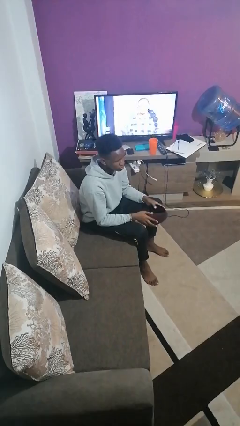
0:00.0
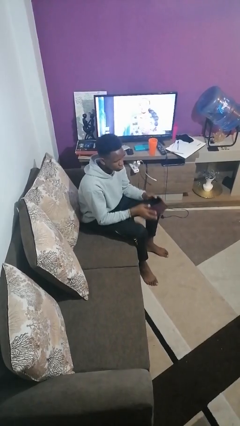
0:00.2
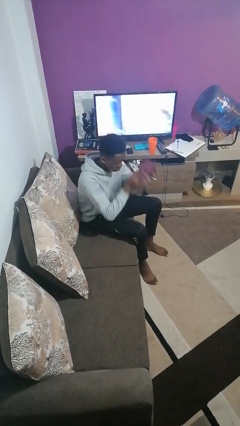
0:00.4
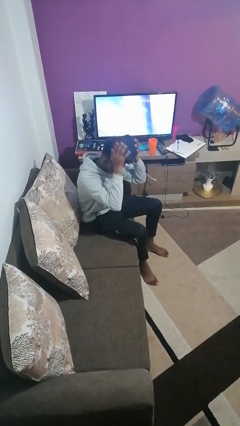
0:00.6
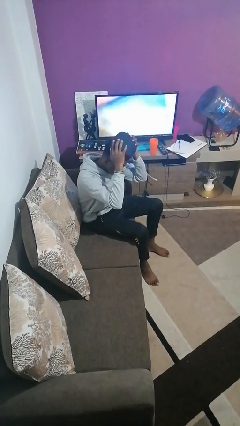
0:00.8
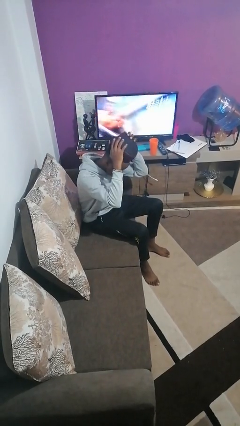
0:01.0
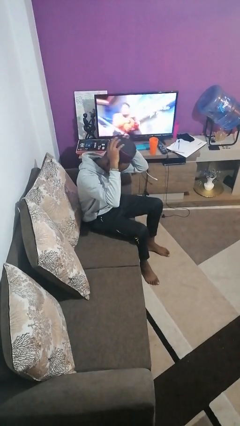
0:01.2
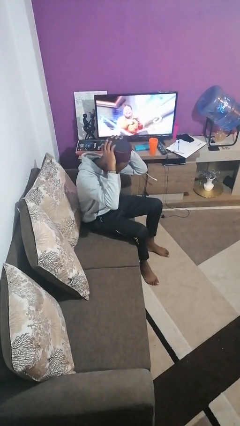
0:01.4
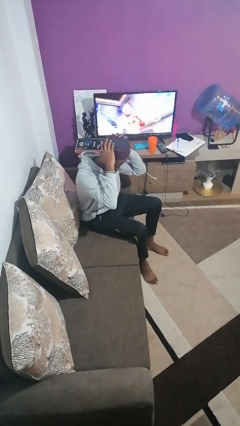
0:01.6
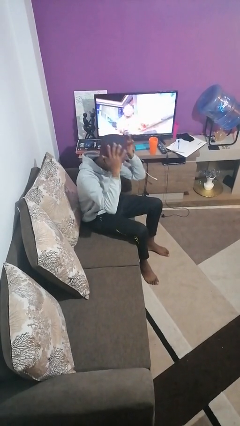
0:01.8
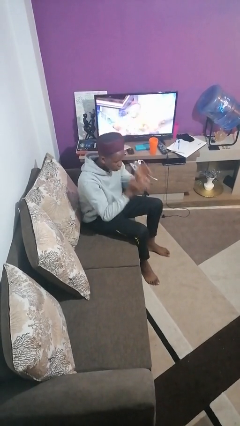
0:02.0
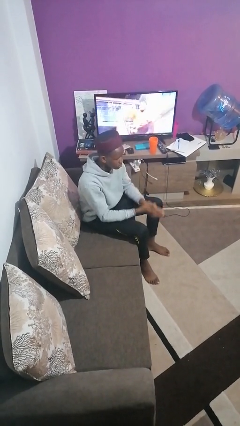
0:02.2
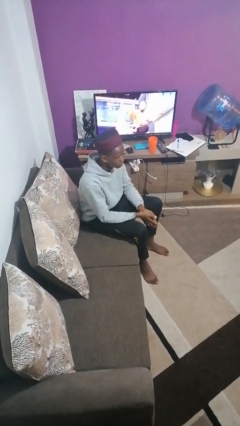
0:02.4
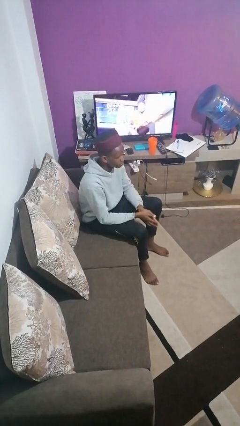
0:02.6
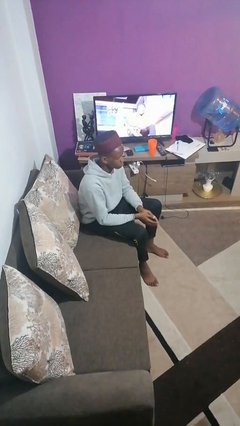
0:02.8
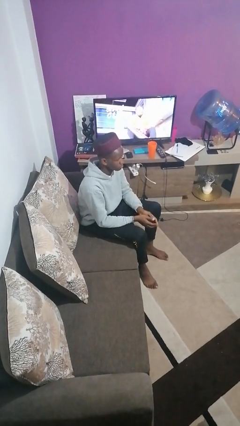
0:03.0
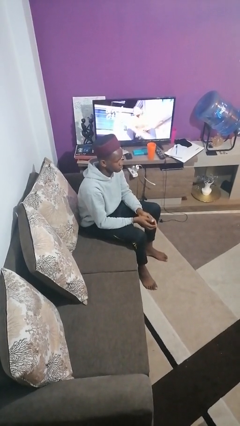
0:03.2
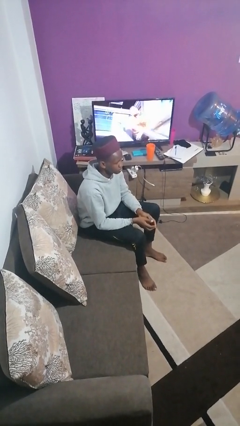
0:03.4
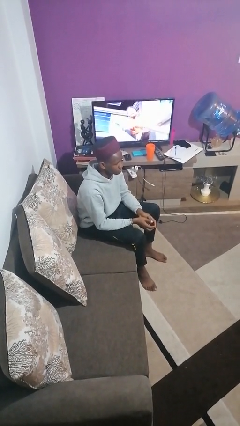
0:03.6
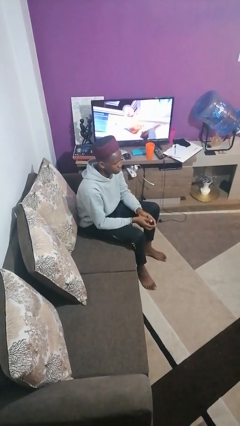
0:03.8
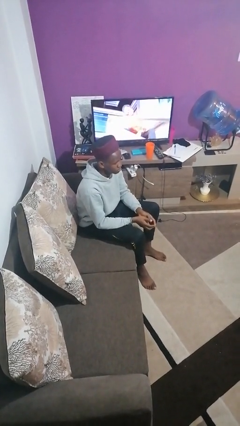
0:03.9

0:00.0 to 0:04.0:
person puts on hat

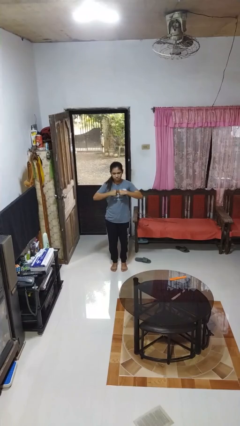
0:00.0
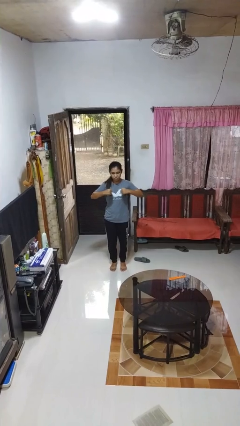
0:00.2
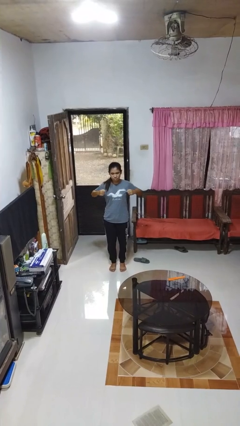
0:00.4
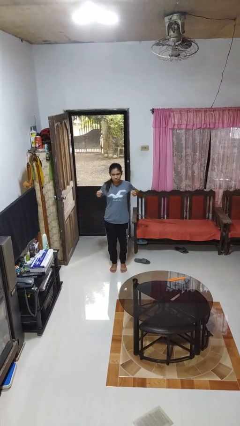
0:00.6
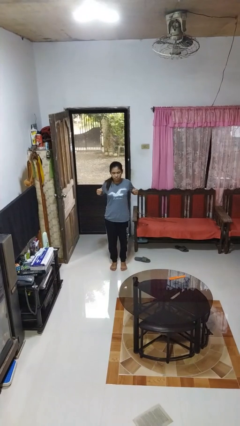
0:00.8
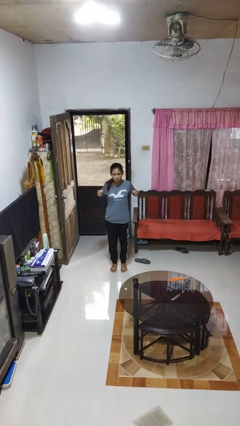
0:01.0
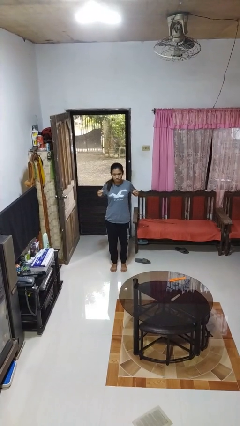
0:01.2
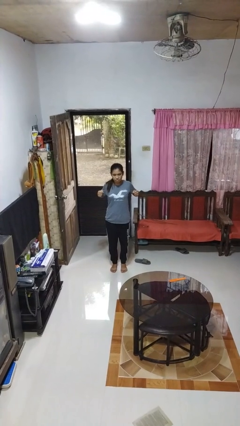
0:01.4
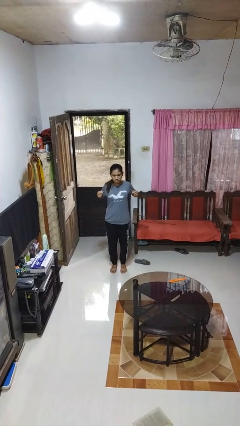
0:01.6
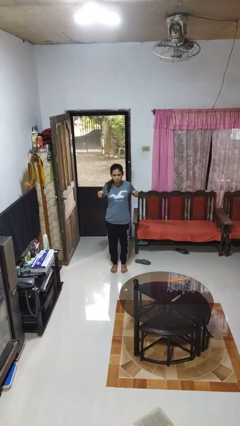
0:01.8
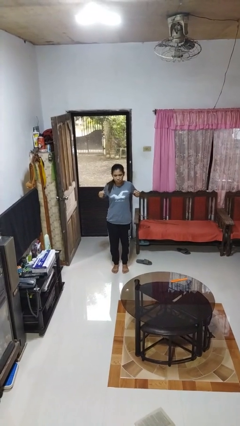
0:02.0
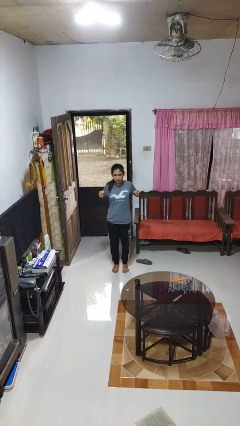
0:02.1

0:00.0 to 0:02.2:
person gestures zoom in

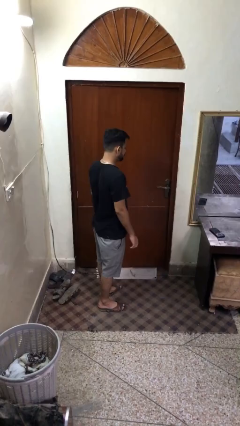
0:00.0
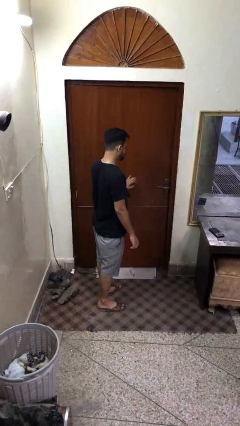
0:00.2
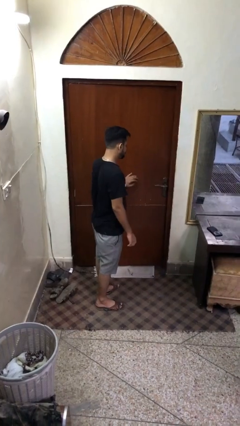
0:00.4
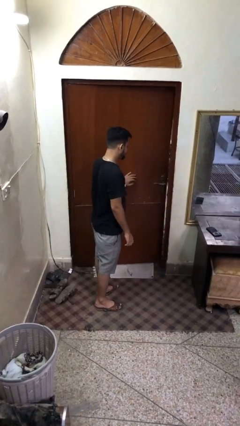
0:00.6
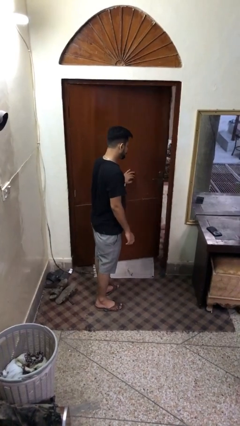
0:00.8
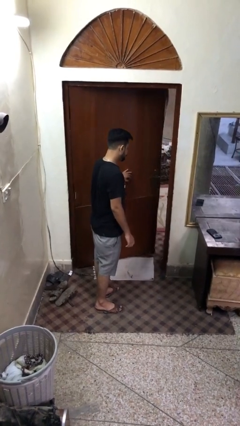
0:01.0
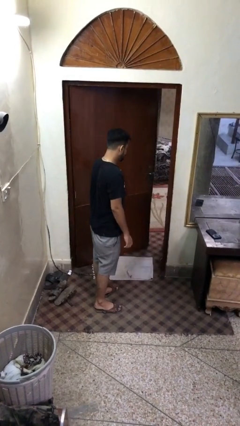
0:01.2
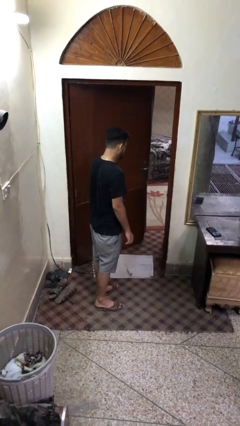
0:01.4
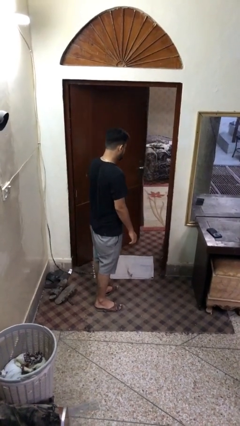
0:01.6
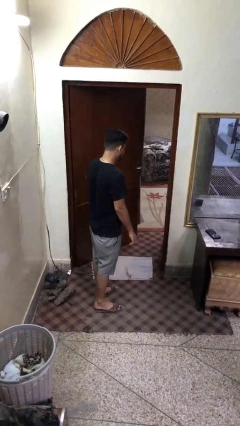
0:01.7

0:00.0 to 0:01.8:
person opens facility door

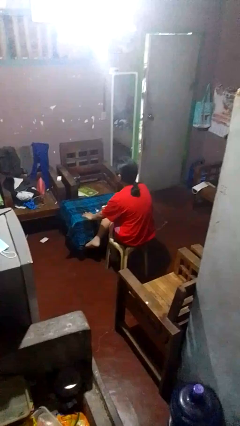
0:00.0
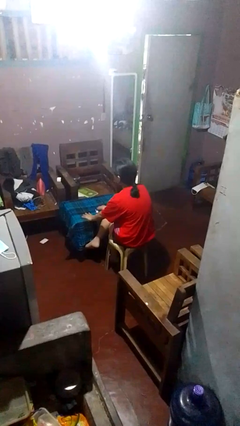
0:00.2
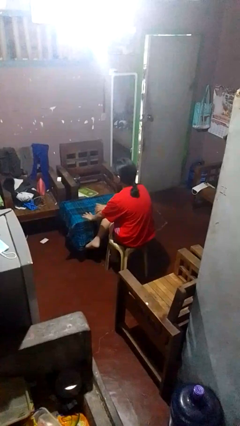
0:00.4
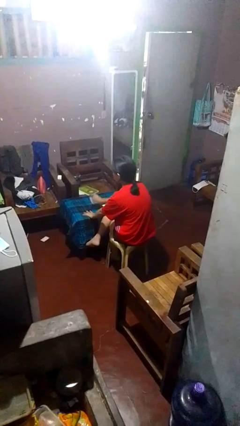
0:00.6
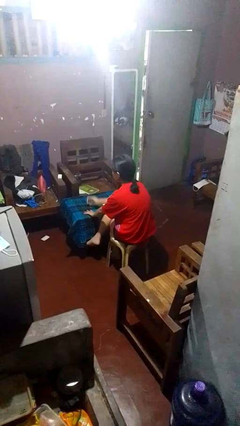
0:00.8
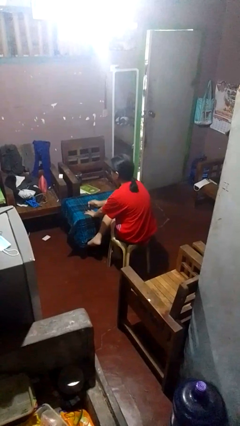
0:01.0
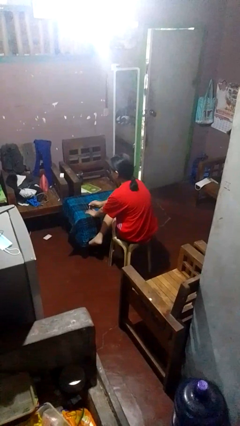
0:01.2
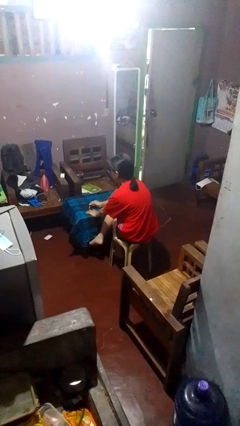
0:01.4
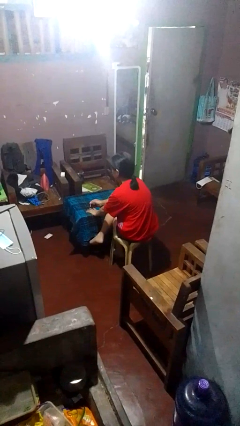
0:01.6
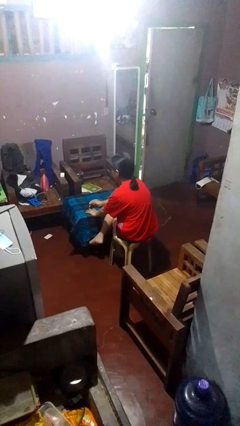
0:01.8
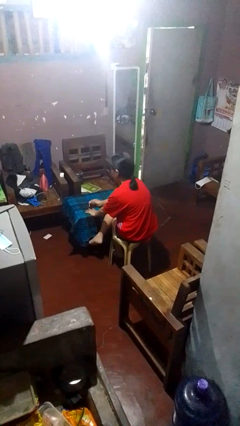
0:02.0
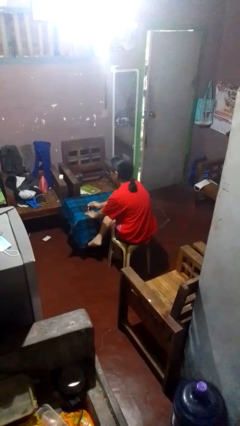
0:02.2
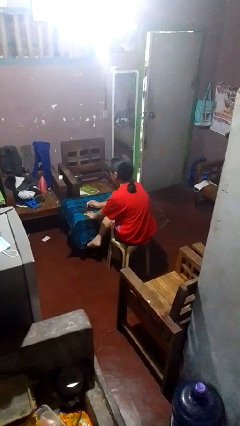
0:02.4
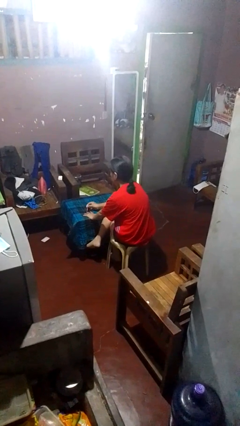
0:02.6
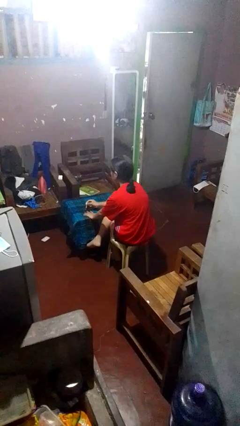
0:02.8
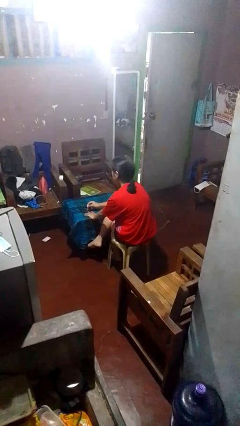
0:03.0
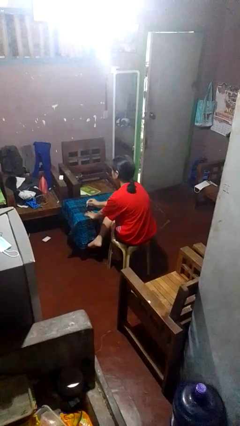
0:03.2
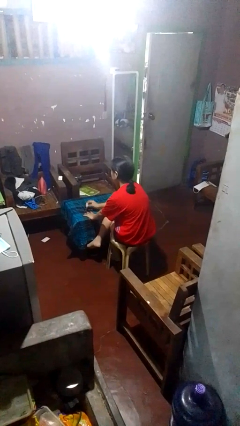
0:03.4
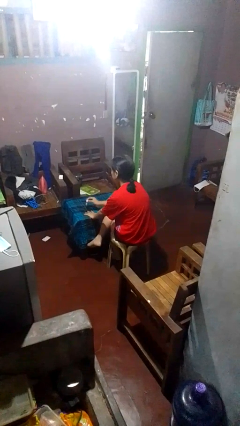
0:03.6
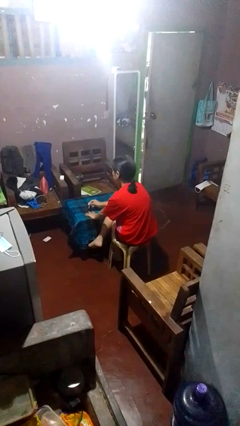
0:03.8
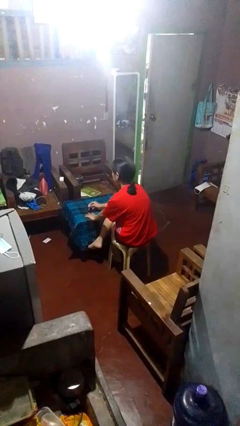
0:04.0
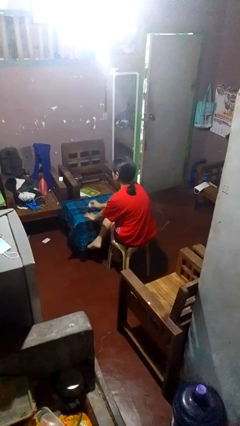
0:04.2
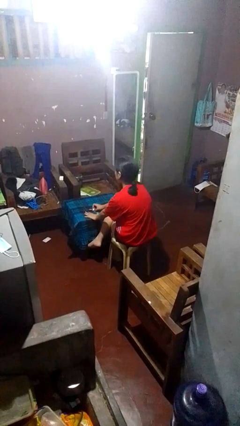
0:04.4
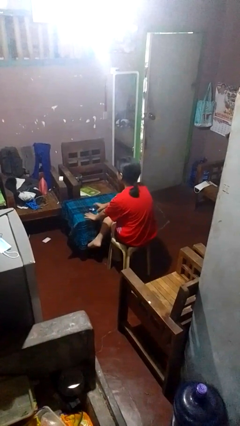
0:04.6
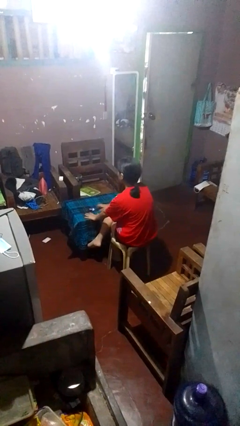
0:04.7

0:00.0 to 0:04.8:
person paints fingernails

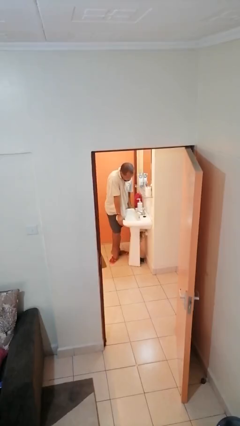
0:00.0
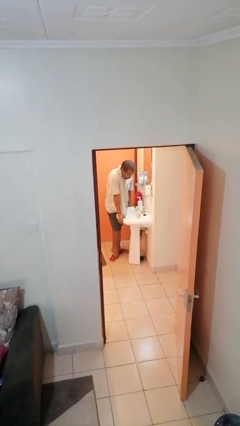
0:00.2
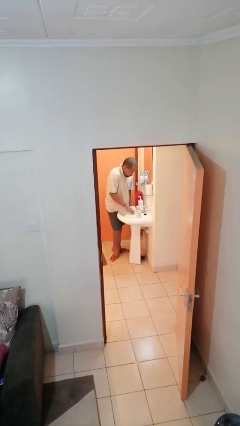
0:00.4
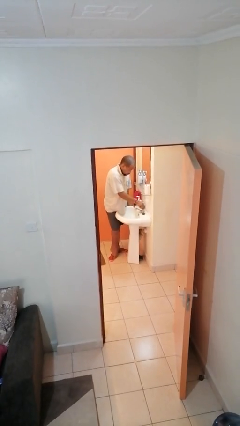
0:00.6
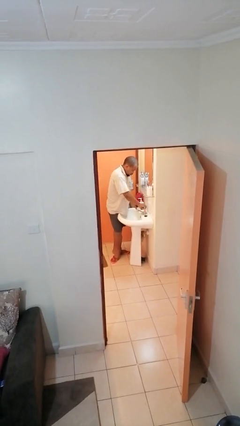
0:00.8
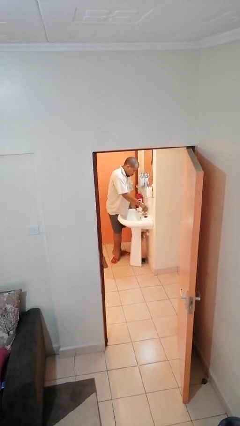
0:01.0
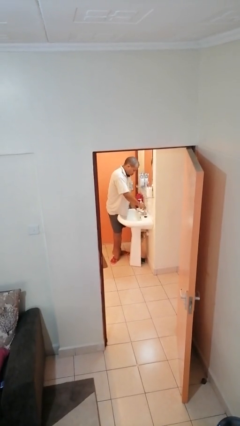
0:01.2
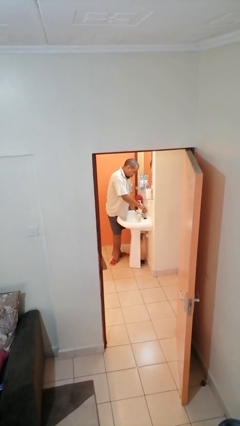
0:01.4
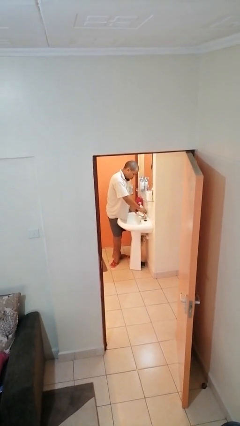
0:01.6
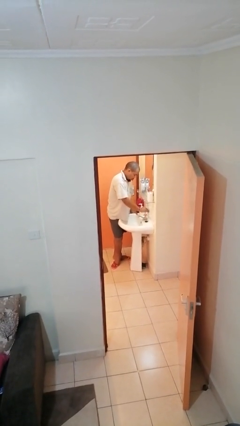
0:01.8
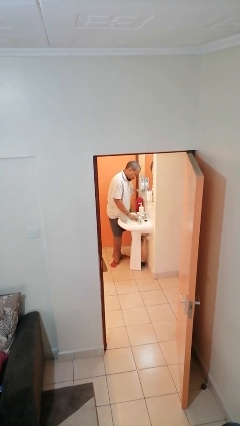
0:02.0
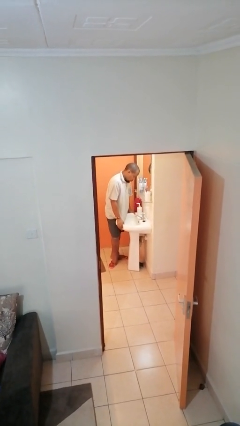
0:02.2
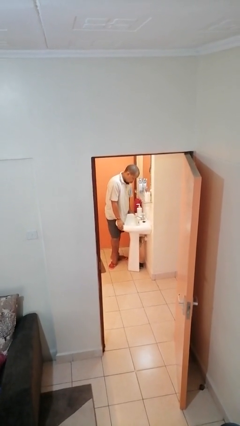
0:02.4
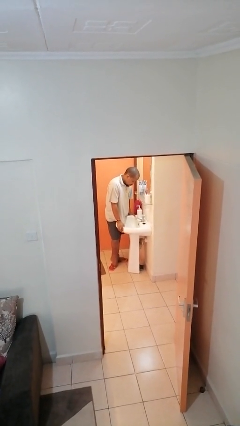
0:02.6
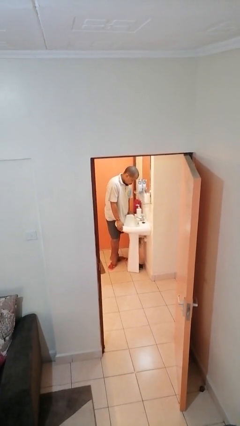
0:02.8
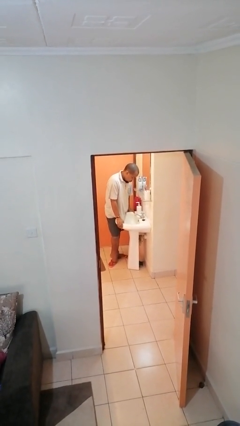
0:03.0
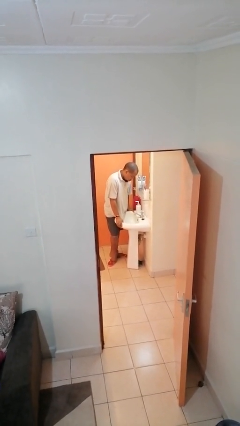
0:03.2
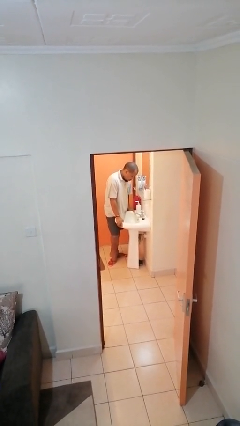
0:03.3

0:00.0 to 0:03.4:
person turns on faucet

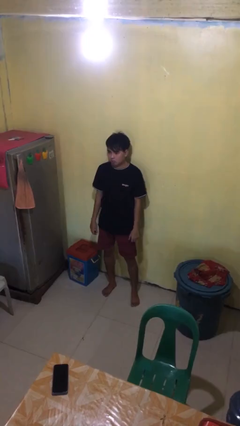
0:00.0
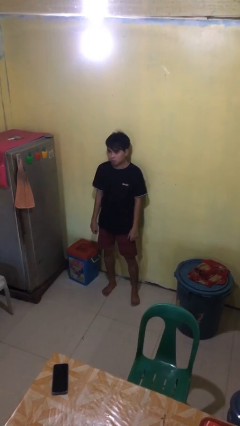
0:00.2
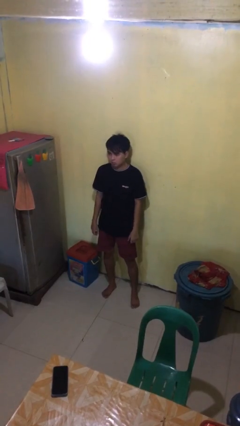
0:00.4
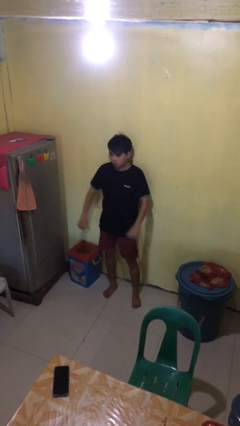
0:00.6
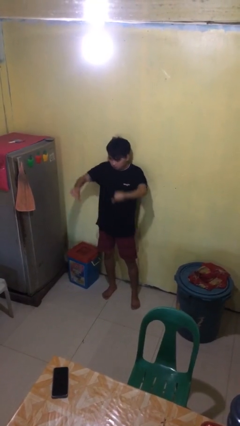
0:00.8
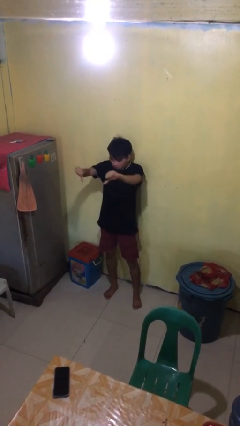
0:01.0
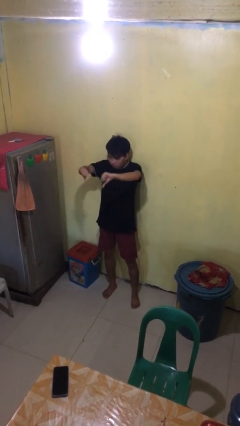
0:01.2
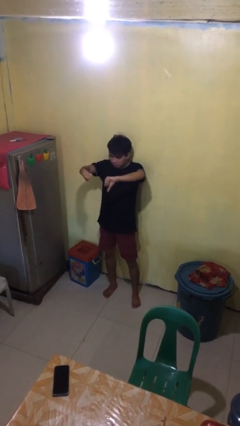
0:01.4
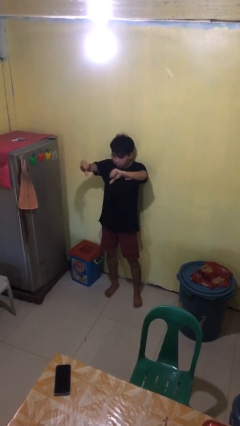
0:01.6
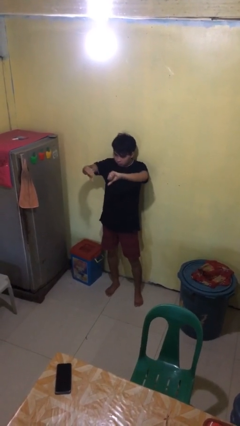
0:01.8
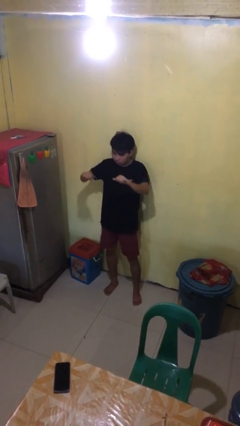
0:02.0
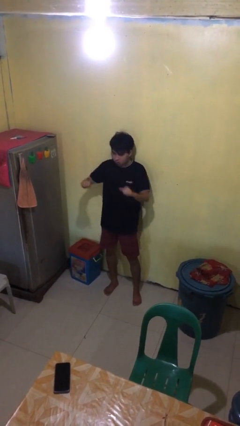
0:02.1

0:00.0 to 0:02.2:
person gestures thumbs down
